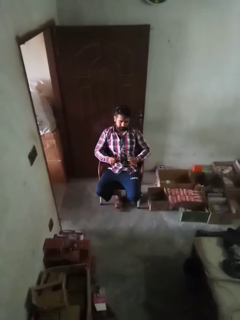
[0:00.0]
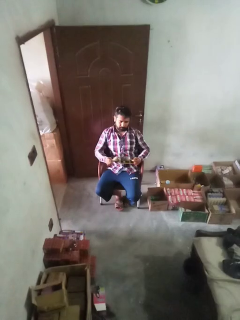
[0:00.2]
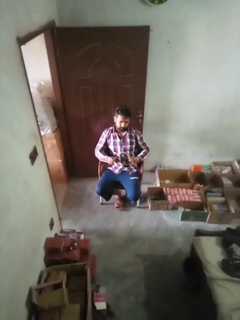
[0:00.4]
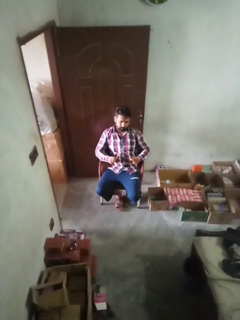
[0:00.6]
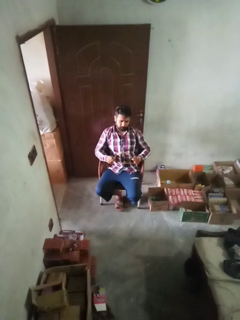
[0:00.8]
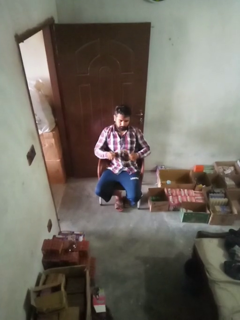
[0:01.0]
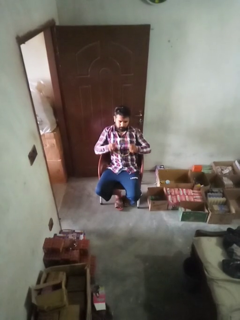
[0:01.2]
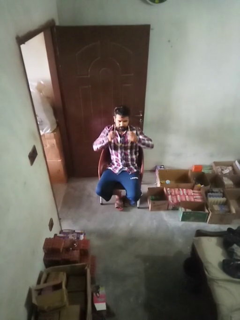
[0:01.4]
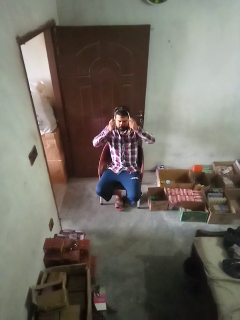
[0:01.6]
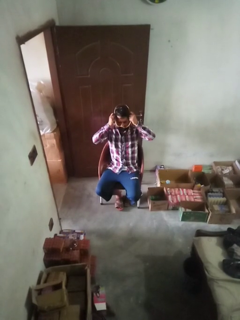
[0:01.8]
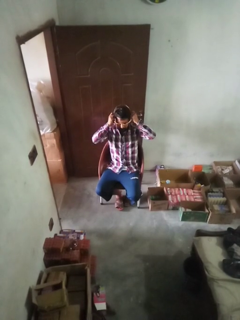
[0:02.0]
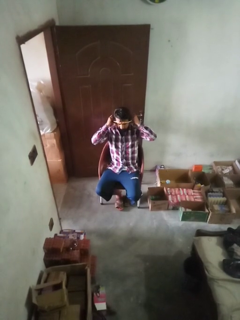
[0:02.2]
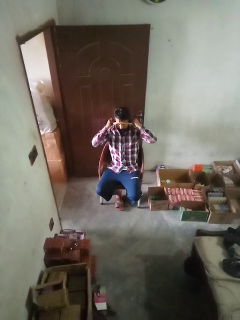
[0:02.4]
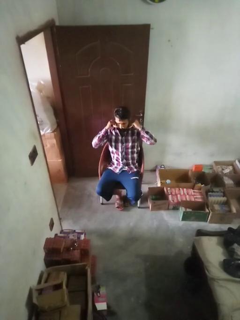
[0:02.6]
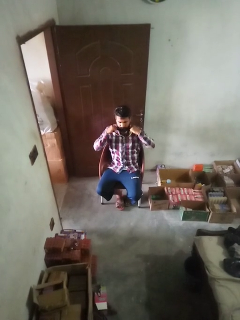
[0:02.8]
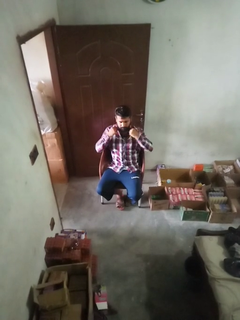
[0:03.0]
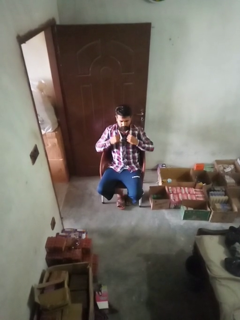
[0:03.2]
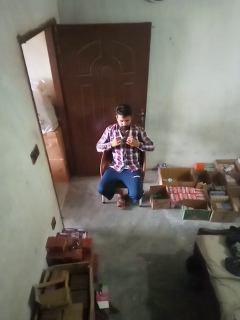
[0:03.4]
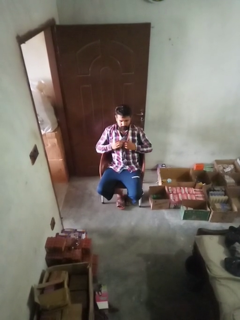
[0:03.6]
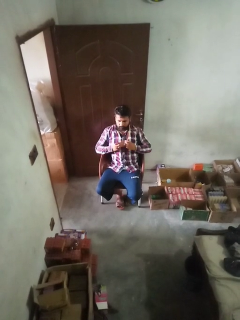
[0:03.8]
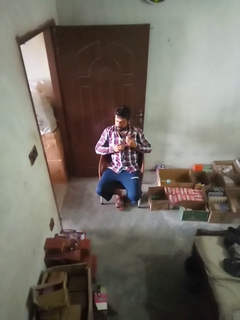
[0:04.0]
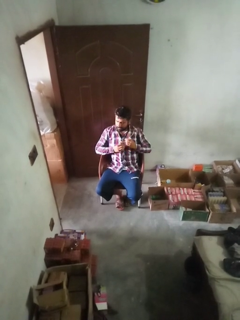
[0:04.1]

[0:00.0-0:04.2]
person puts on necklace

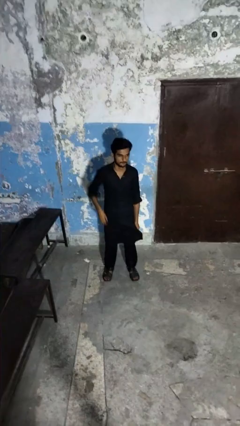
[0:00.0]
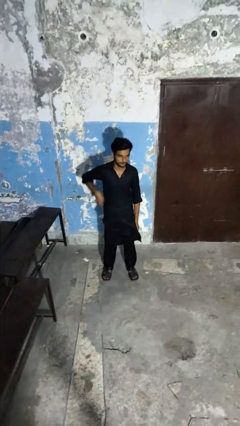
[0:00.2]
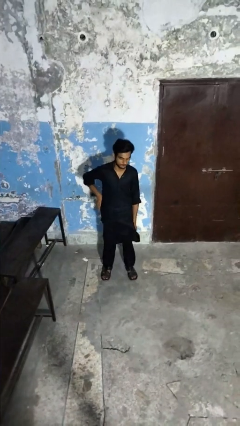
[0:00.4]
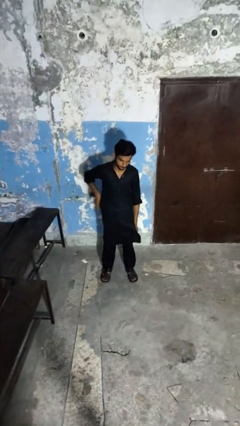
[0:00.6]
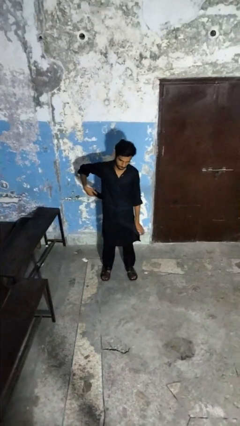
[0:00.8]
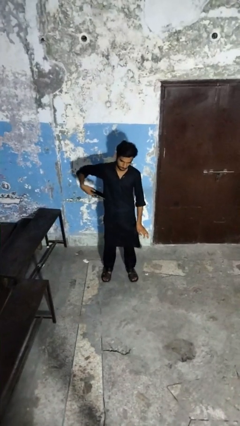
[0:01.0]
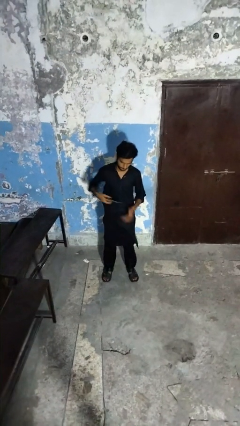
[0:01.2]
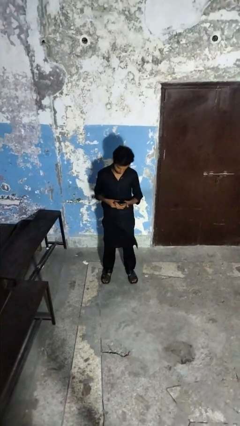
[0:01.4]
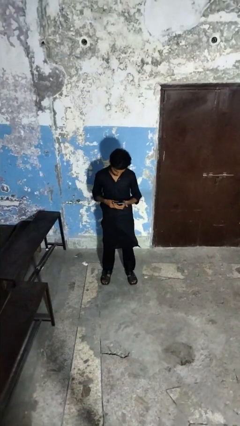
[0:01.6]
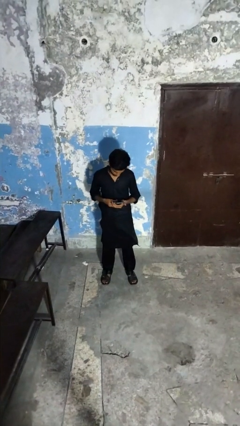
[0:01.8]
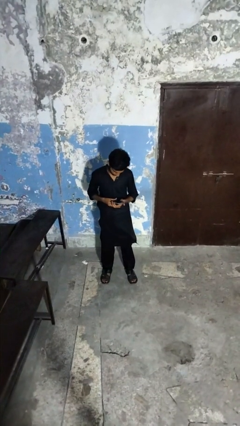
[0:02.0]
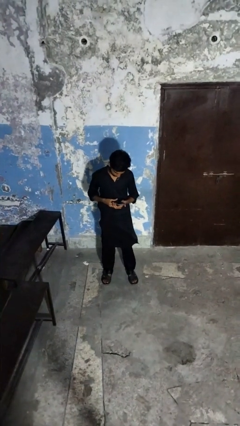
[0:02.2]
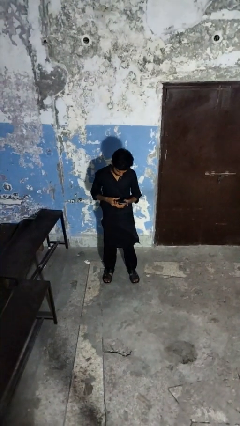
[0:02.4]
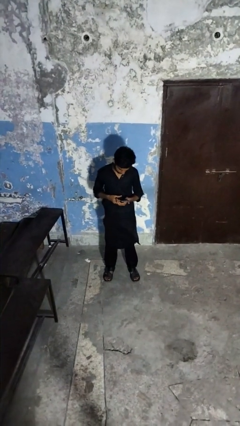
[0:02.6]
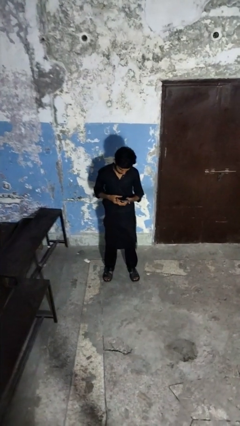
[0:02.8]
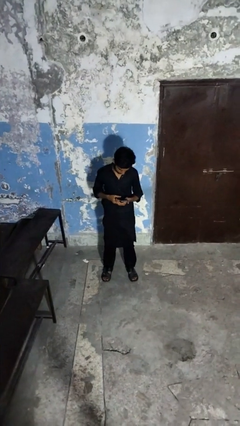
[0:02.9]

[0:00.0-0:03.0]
person takes phone from pocket

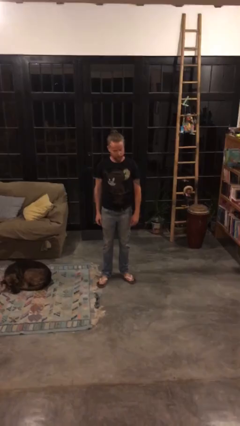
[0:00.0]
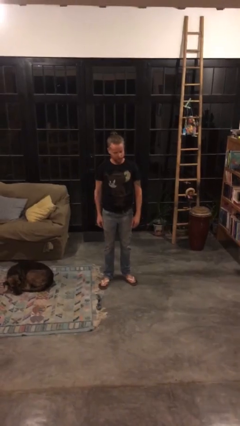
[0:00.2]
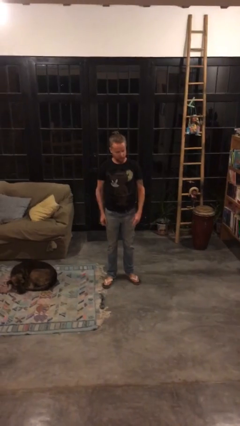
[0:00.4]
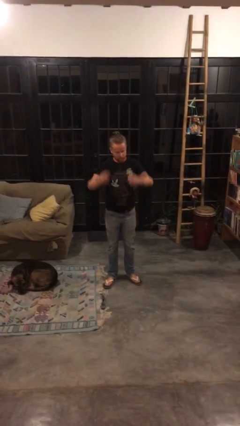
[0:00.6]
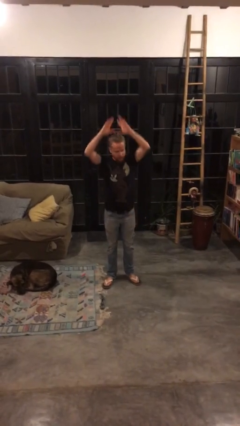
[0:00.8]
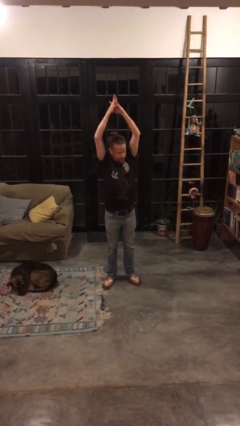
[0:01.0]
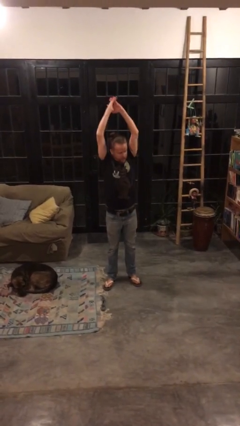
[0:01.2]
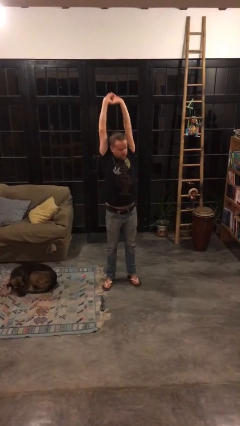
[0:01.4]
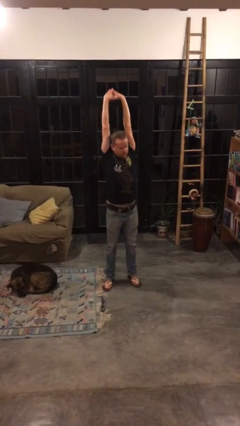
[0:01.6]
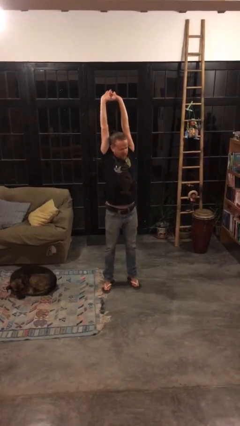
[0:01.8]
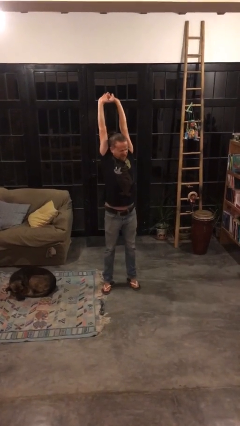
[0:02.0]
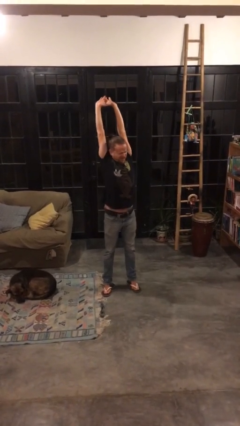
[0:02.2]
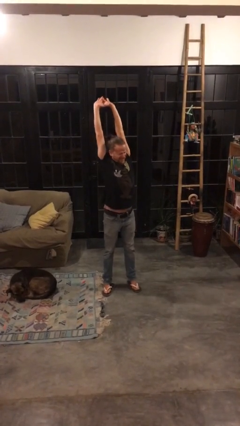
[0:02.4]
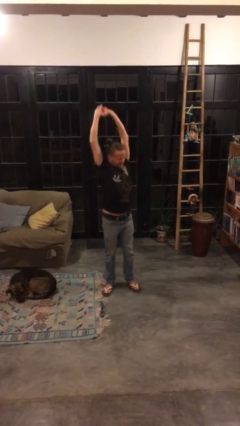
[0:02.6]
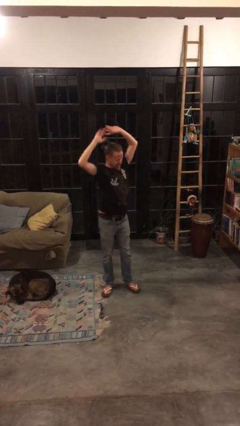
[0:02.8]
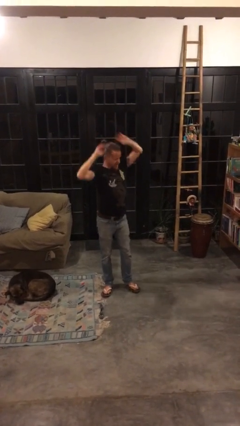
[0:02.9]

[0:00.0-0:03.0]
person stretches arms over head

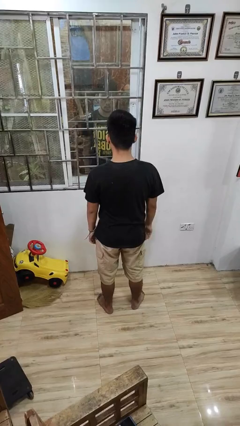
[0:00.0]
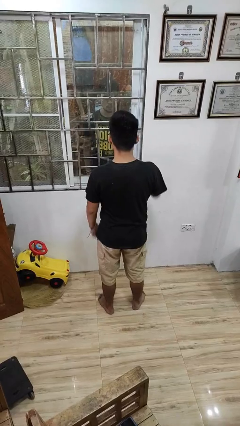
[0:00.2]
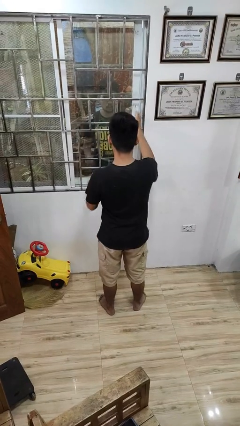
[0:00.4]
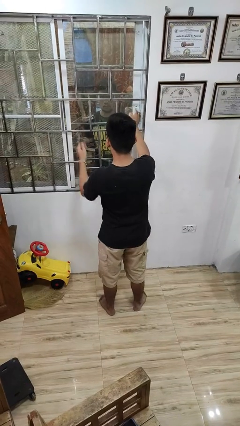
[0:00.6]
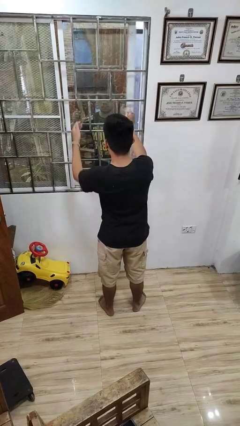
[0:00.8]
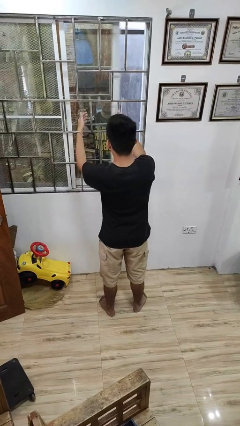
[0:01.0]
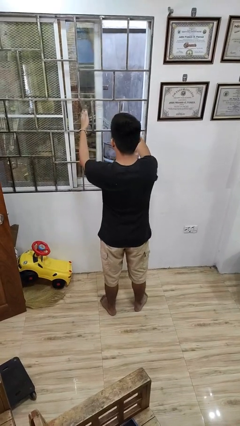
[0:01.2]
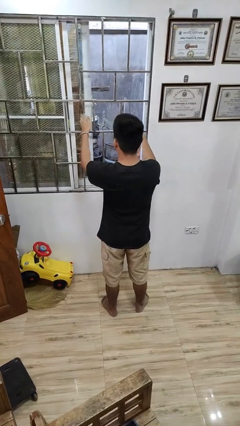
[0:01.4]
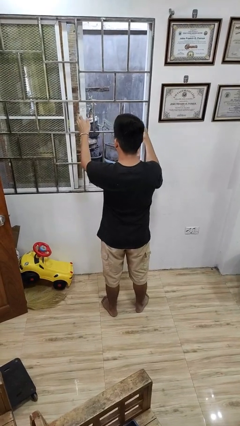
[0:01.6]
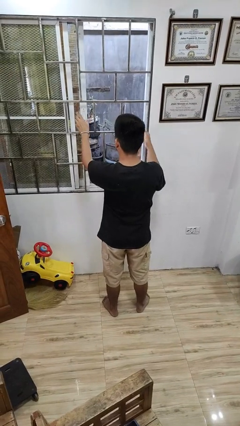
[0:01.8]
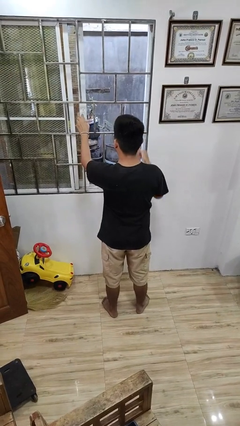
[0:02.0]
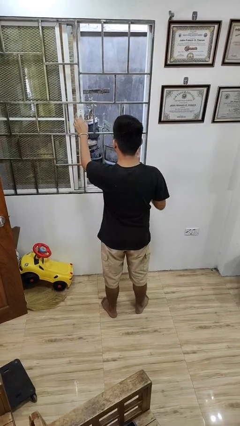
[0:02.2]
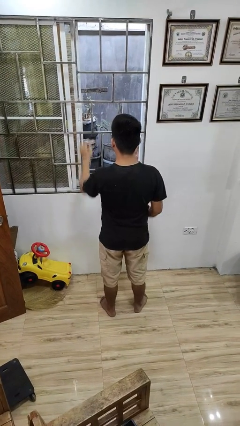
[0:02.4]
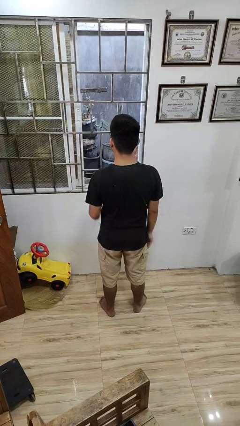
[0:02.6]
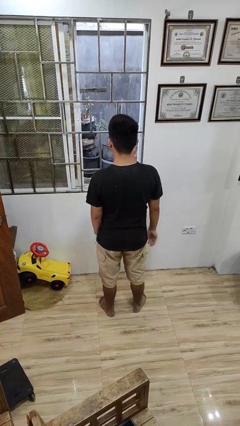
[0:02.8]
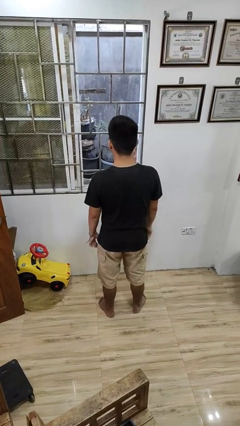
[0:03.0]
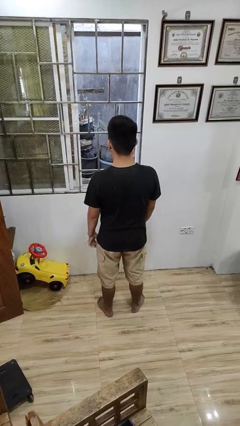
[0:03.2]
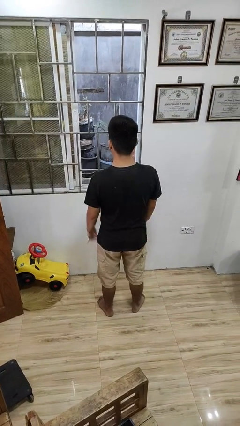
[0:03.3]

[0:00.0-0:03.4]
person opens home window

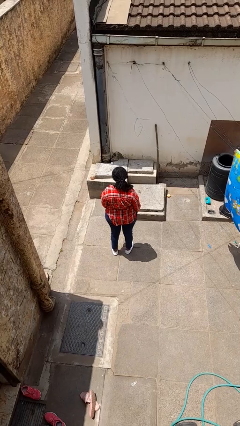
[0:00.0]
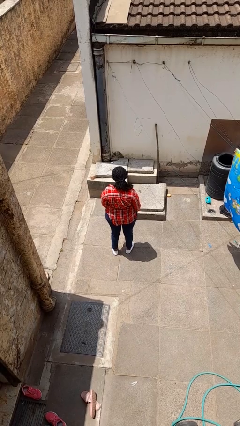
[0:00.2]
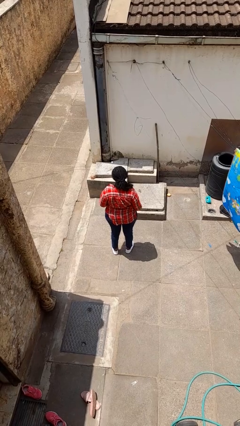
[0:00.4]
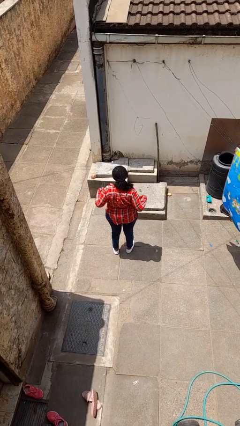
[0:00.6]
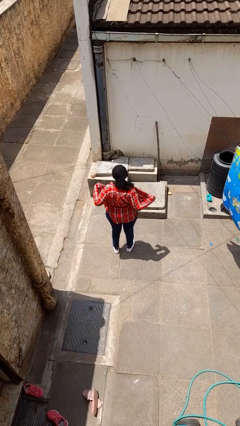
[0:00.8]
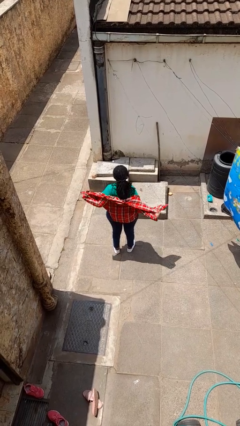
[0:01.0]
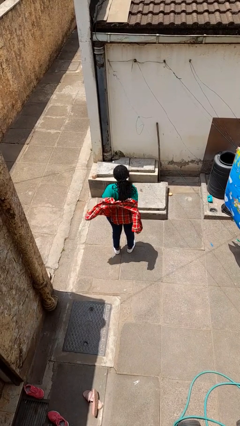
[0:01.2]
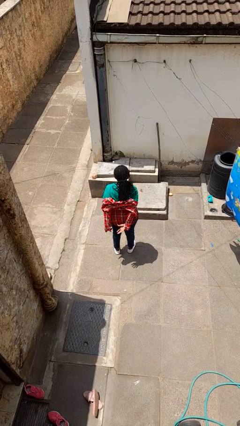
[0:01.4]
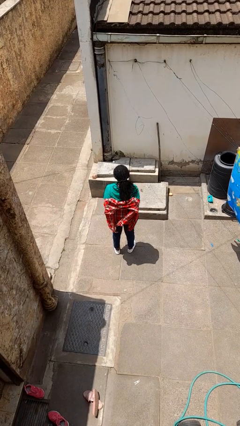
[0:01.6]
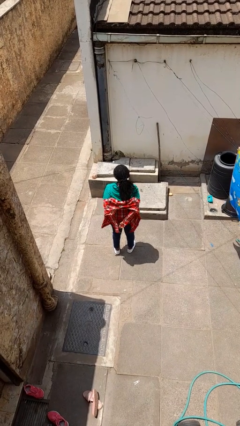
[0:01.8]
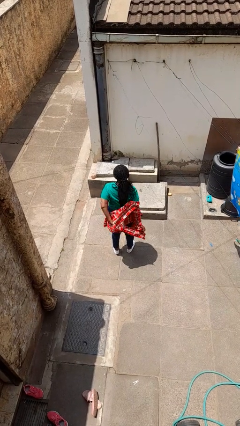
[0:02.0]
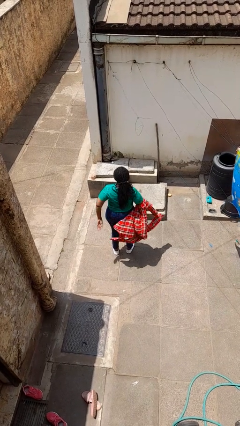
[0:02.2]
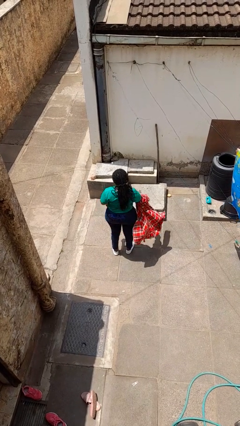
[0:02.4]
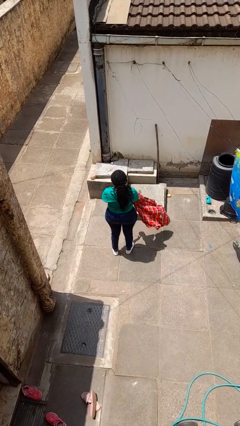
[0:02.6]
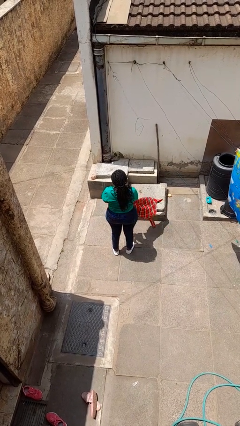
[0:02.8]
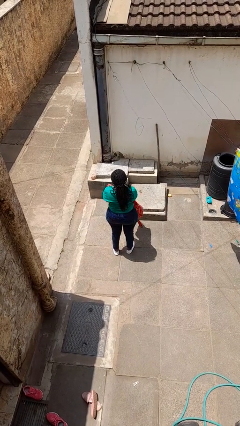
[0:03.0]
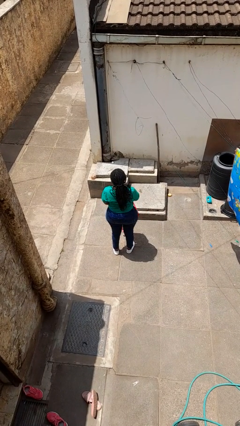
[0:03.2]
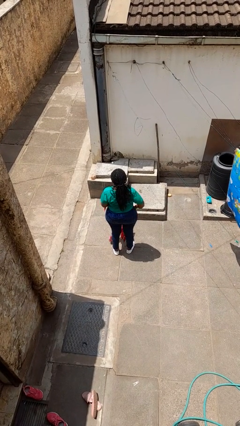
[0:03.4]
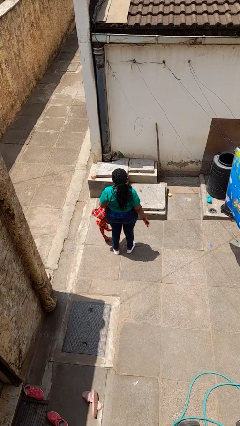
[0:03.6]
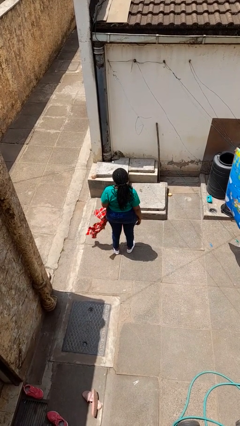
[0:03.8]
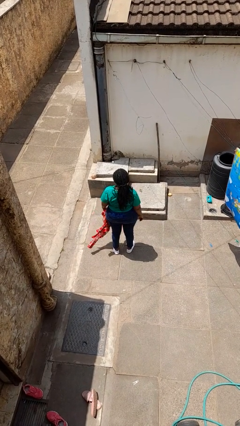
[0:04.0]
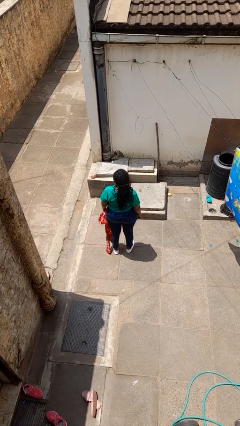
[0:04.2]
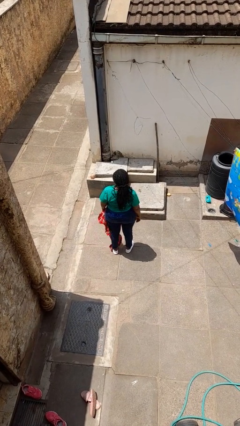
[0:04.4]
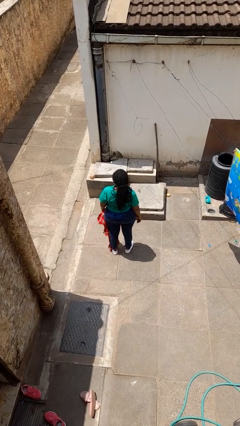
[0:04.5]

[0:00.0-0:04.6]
person takes off shirt

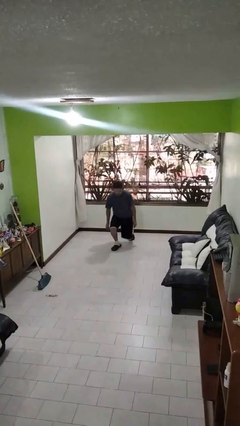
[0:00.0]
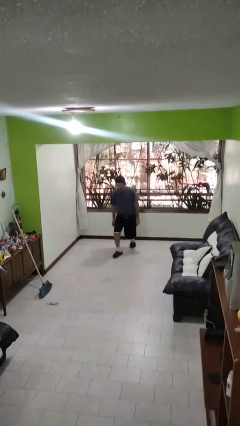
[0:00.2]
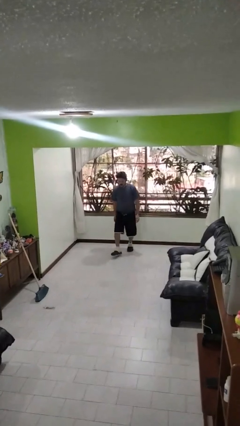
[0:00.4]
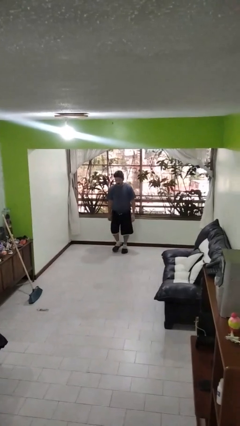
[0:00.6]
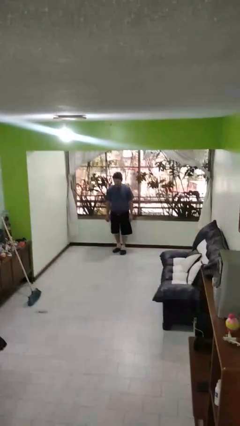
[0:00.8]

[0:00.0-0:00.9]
person stands up from floor
